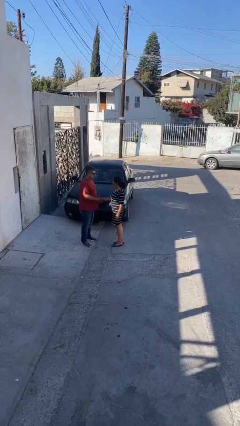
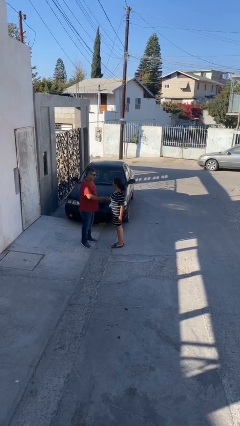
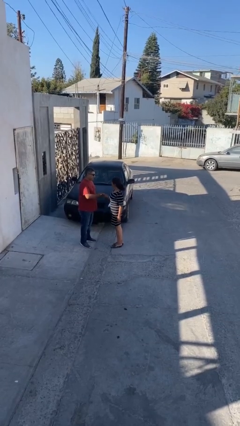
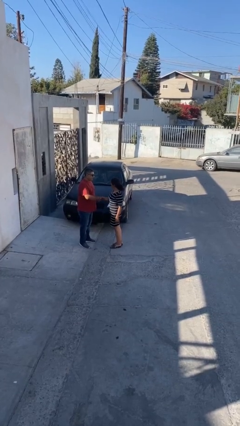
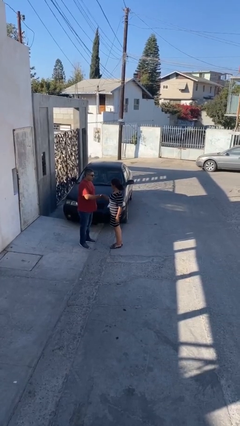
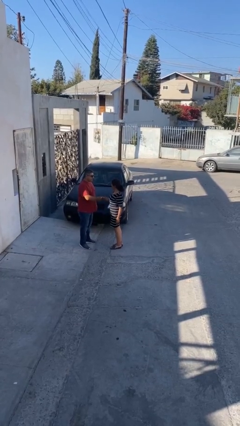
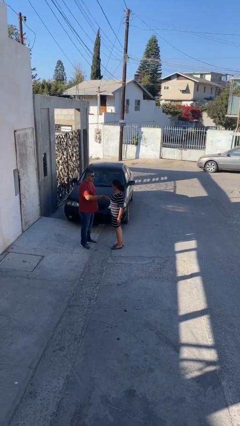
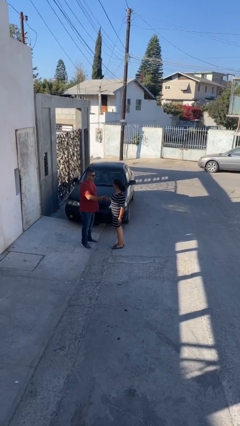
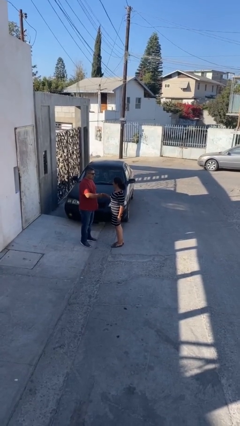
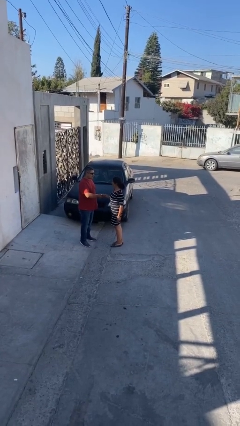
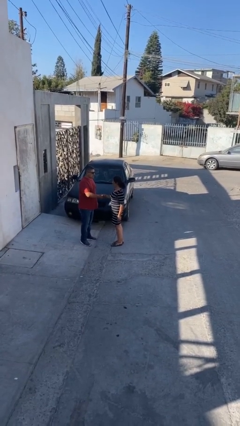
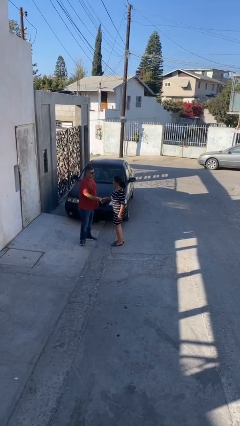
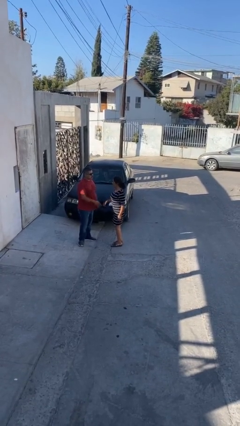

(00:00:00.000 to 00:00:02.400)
person shakes hand

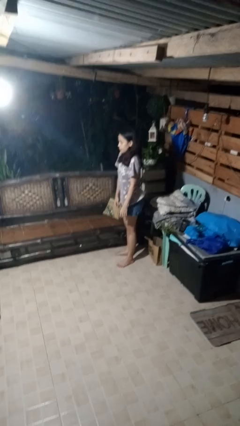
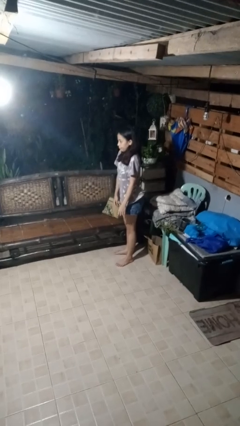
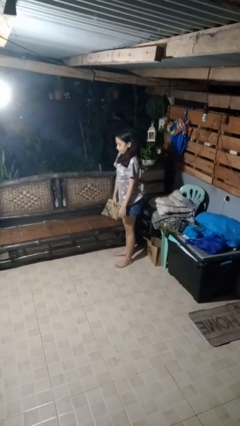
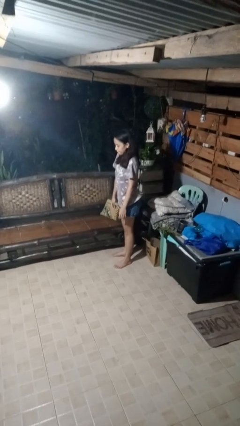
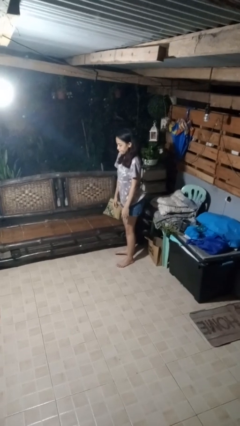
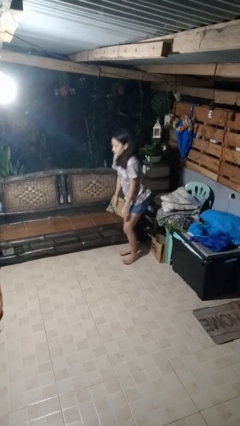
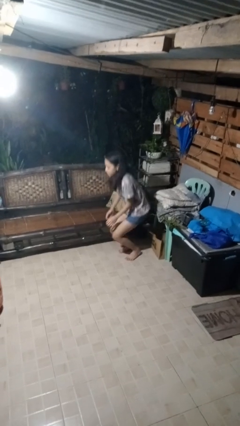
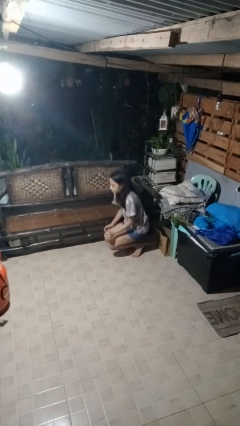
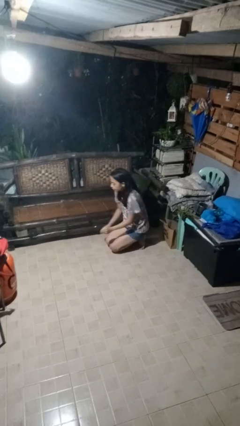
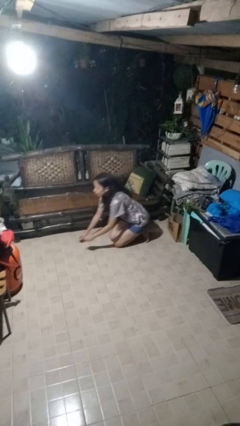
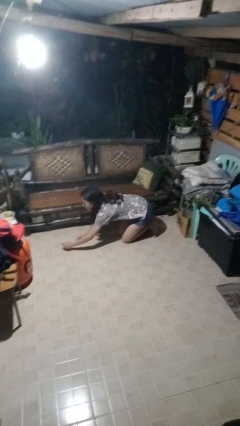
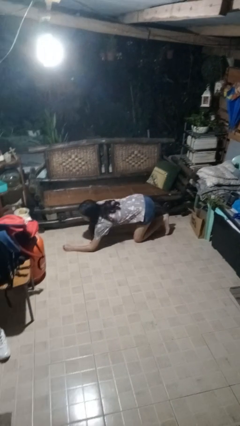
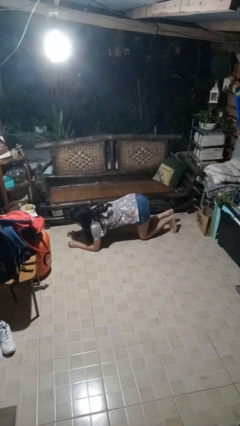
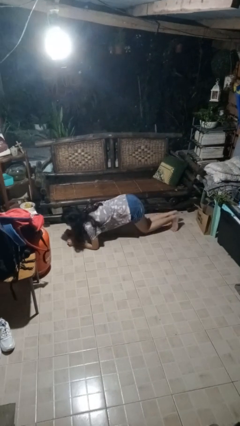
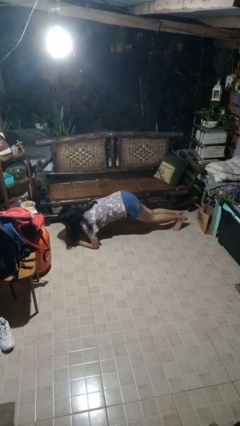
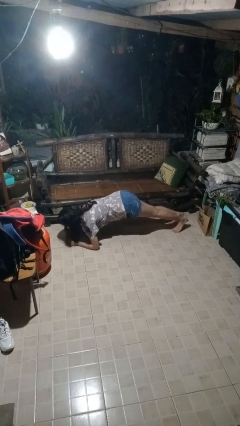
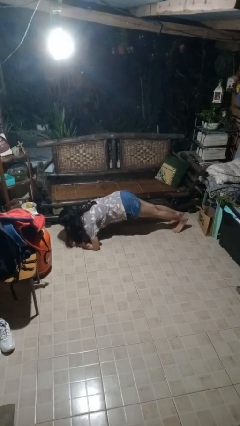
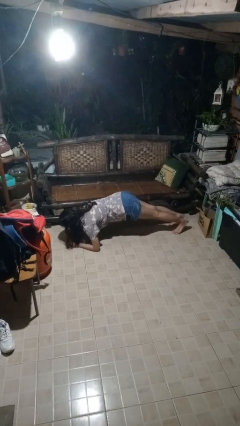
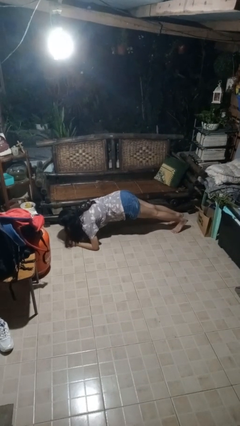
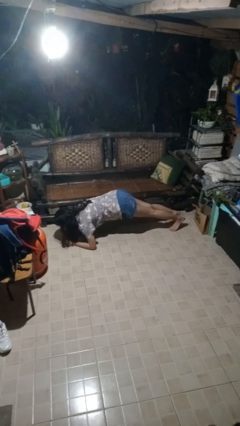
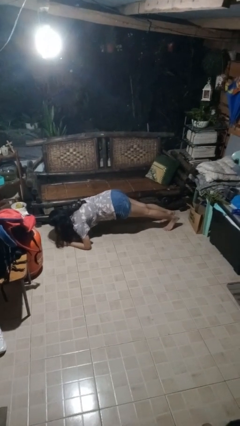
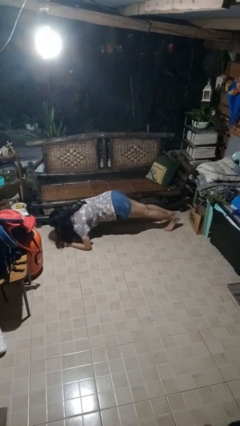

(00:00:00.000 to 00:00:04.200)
person exercises with plank

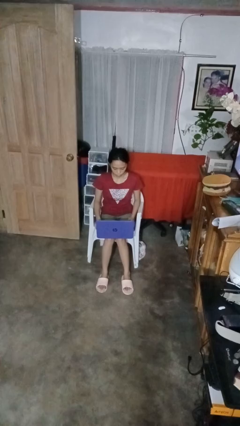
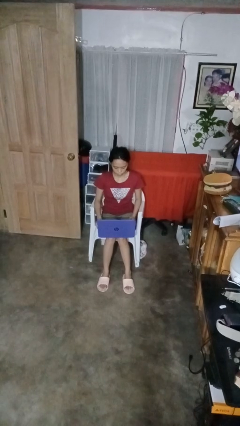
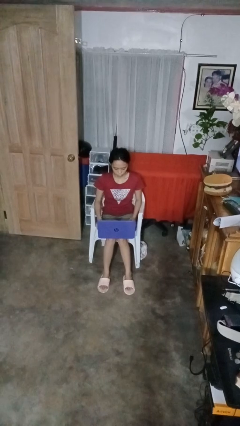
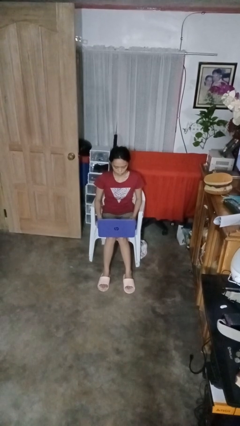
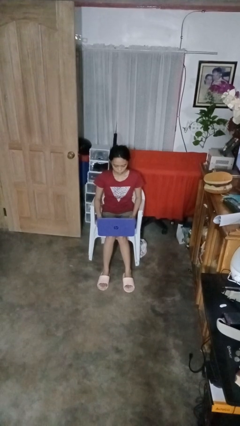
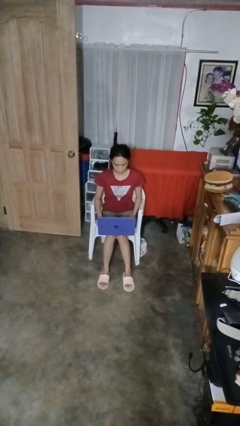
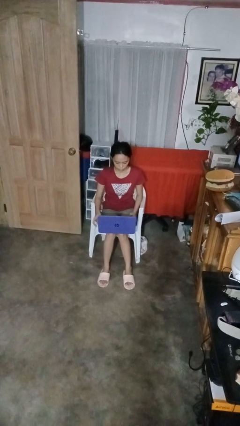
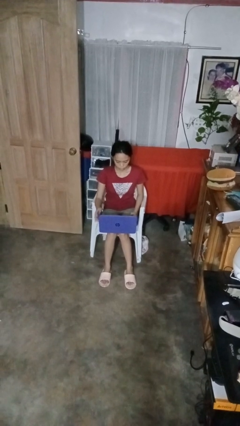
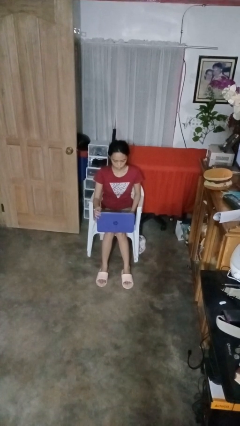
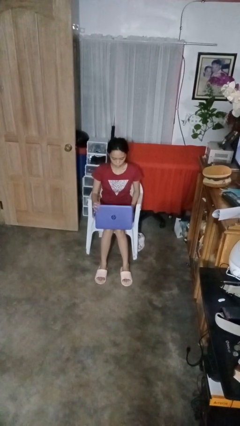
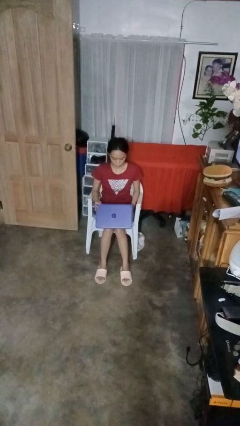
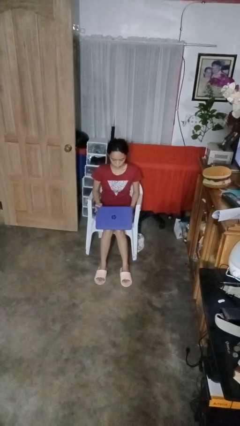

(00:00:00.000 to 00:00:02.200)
person closes laptop

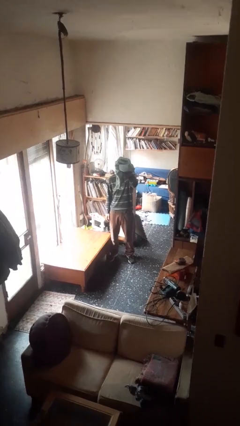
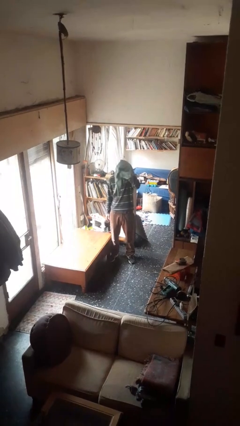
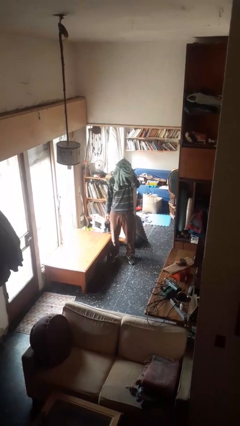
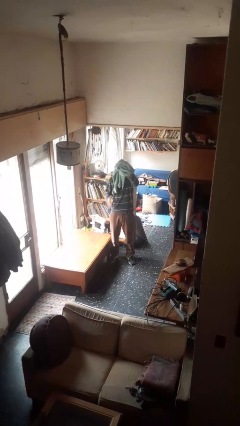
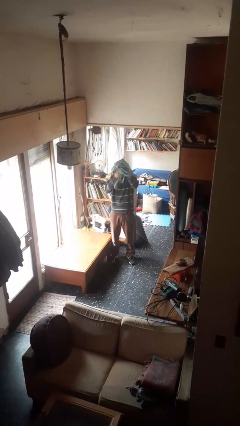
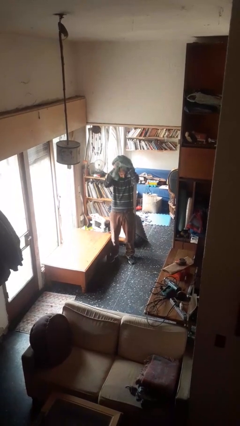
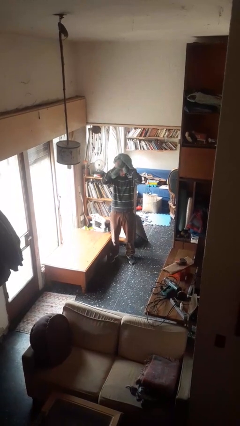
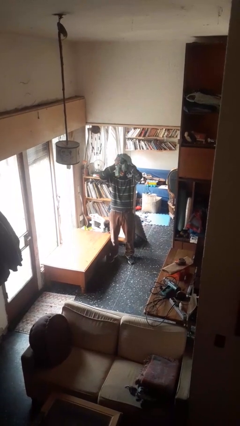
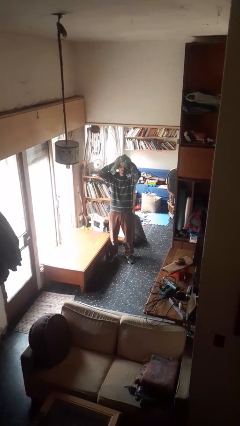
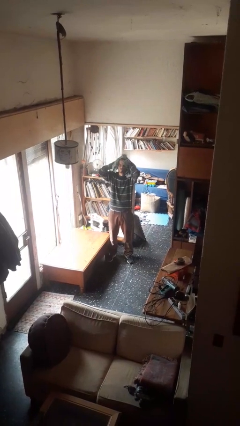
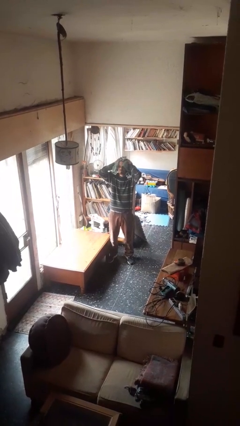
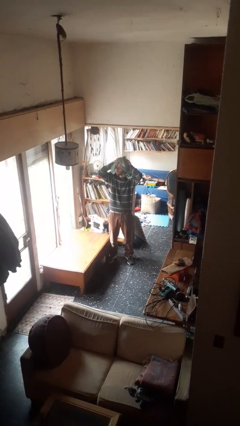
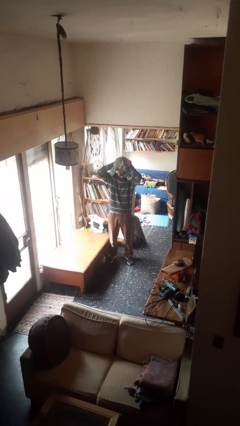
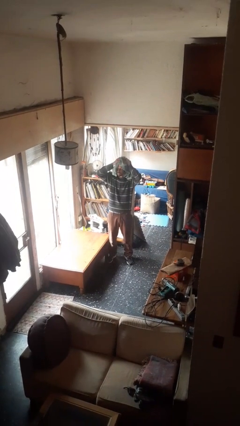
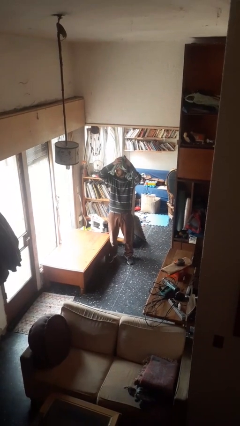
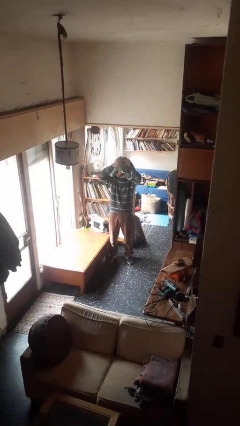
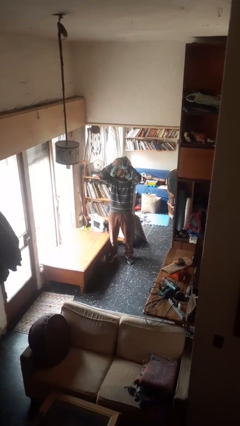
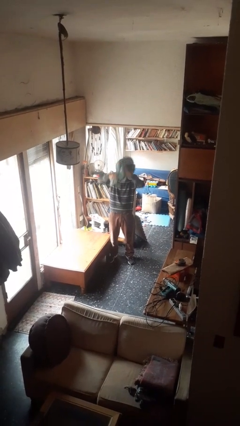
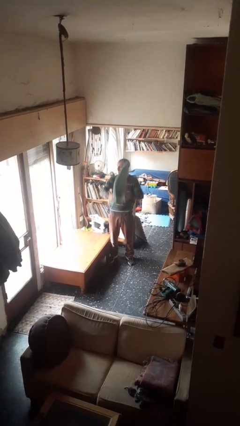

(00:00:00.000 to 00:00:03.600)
person dries hair with towel

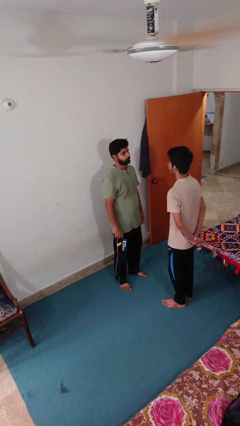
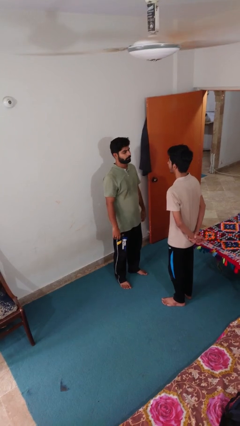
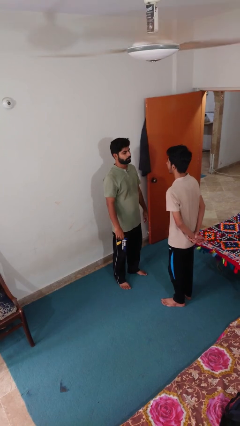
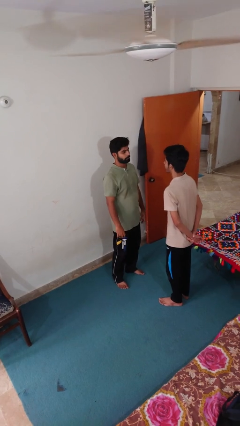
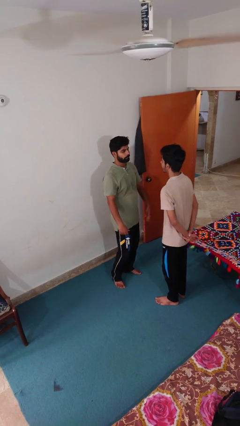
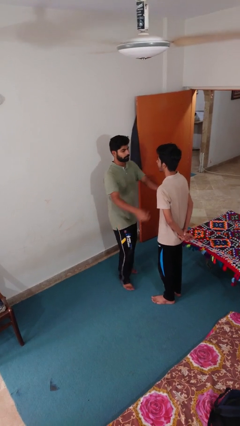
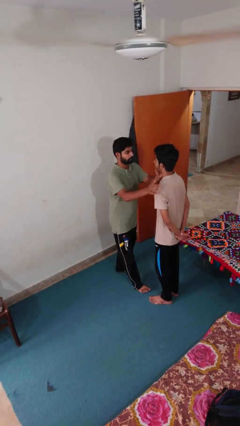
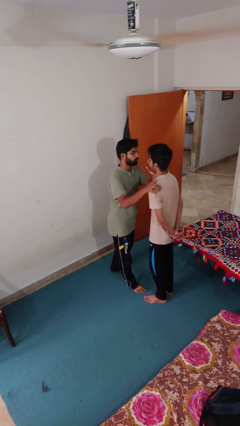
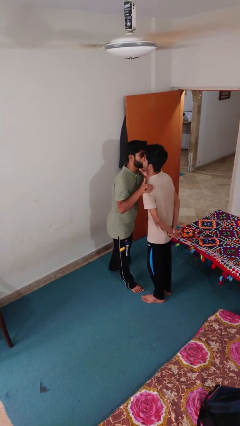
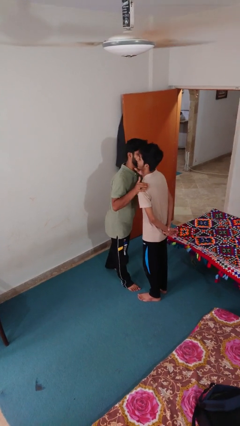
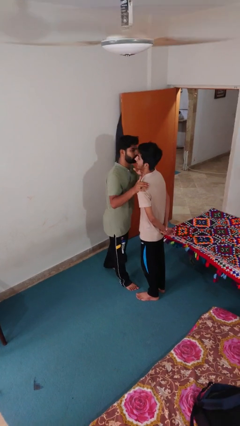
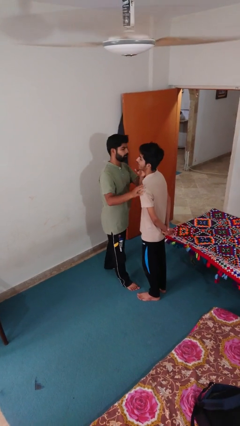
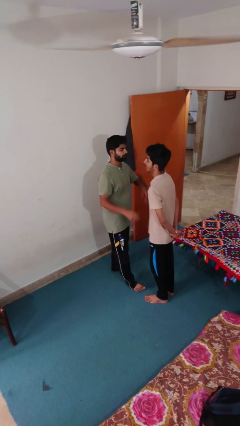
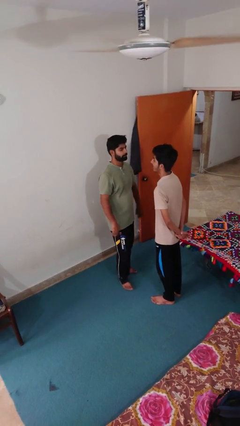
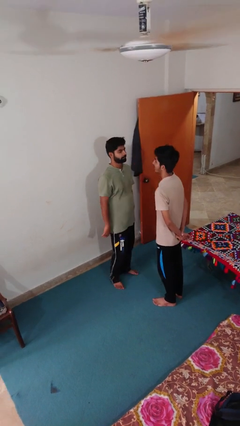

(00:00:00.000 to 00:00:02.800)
person kisses cheek of person

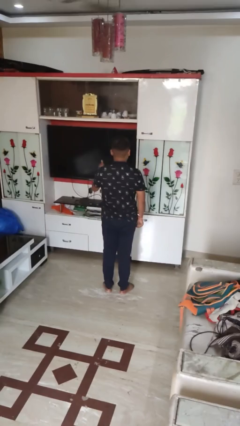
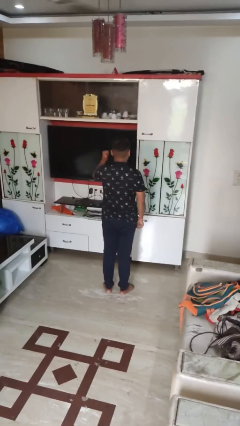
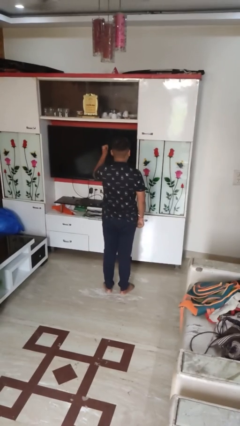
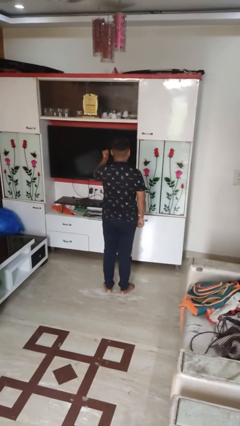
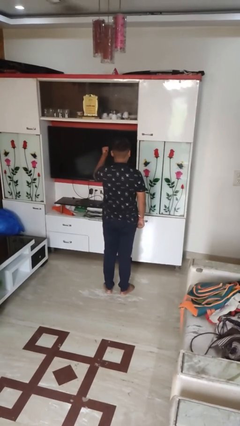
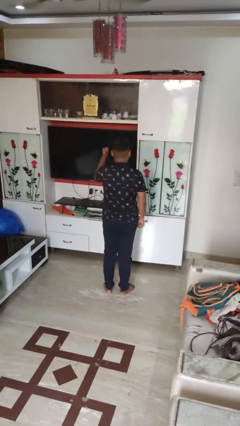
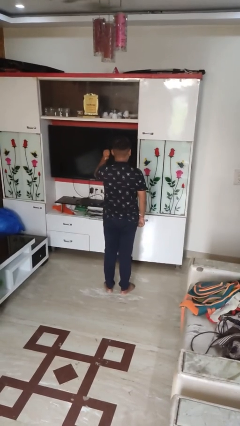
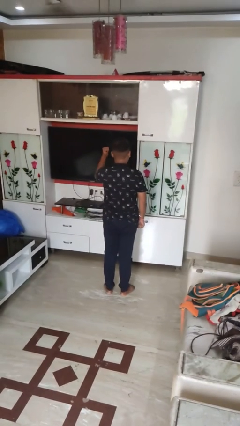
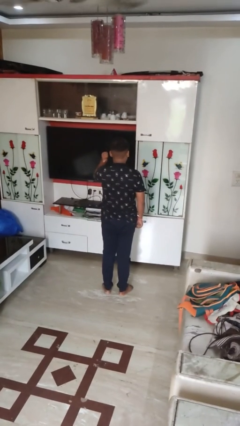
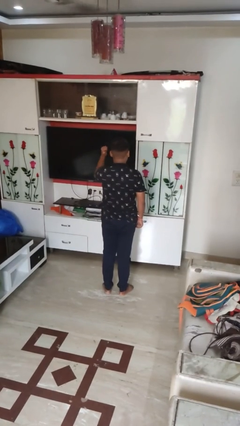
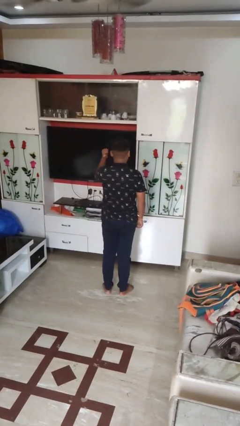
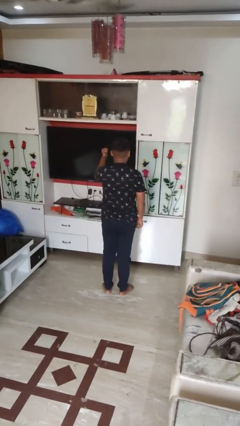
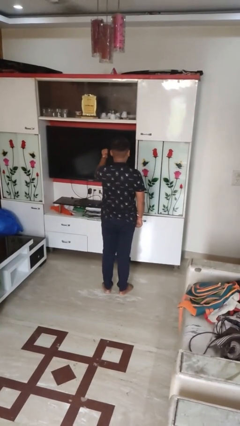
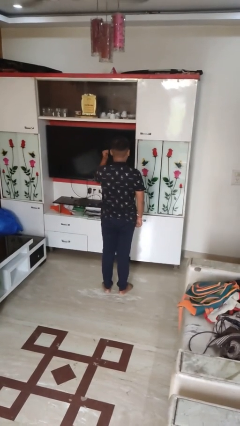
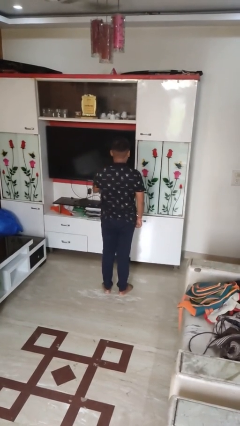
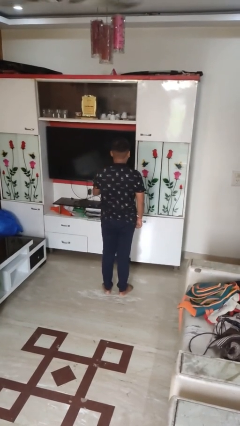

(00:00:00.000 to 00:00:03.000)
person gestures behind me
